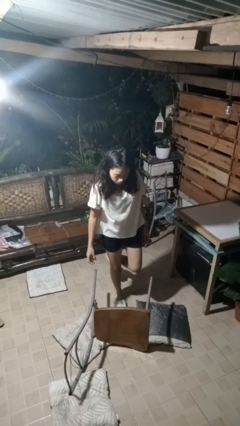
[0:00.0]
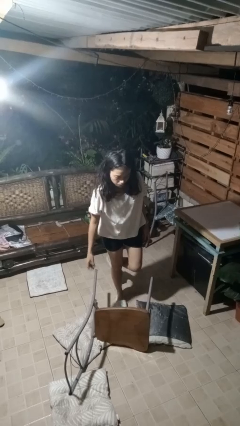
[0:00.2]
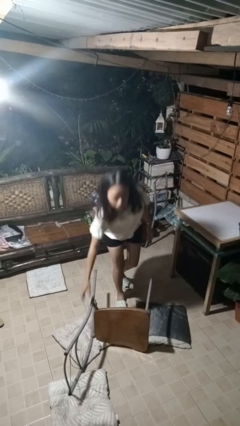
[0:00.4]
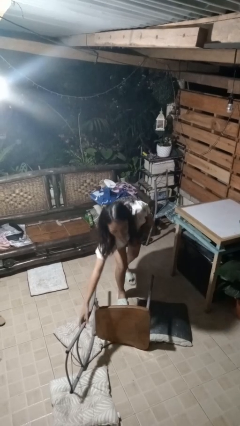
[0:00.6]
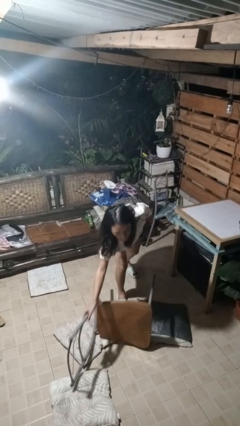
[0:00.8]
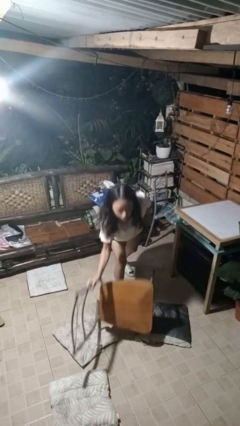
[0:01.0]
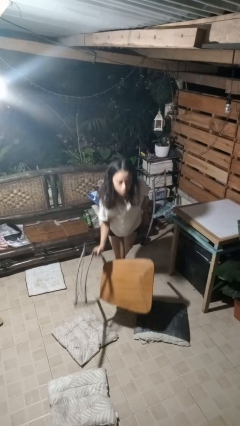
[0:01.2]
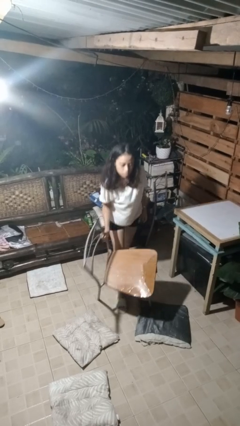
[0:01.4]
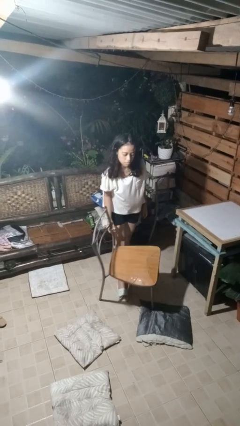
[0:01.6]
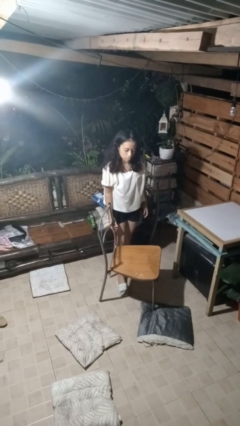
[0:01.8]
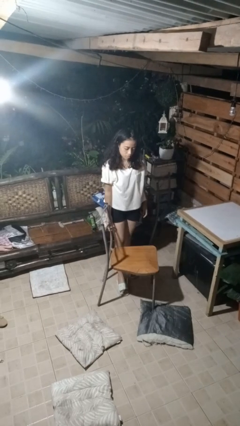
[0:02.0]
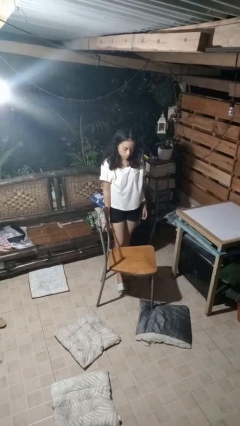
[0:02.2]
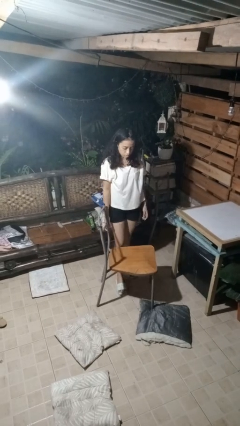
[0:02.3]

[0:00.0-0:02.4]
person sets upright furniture

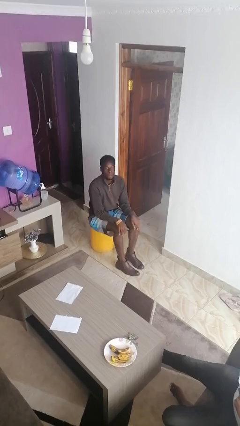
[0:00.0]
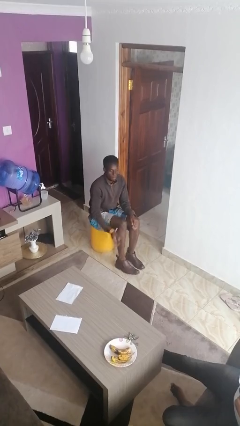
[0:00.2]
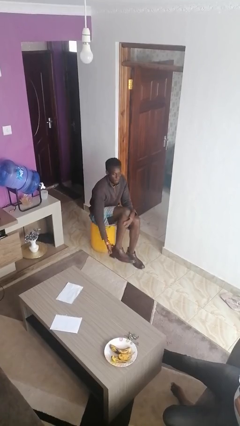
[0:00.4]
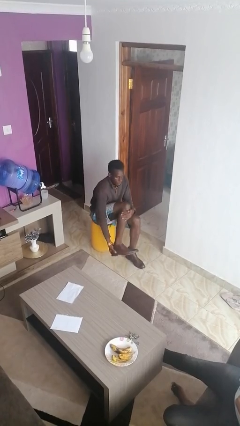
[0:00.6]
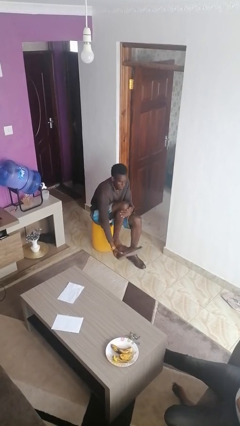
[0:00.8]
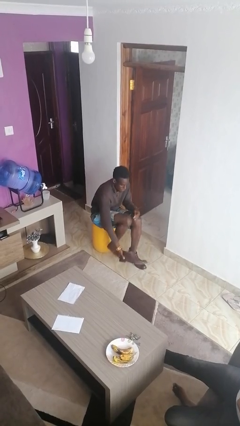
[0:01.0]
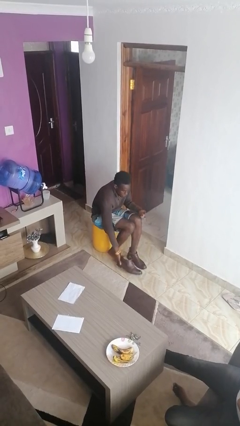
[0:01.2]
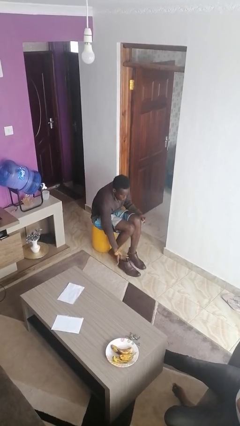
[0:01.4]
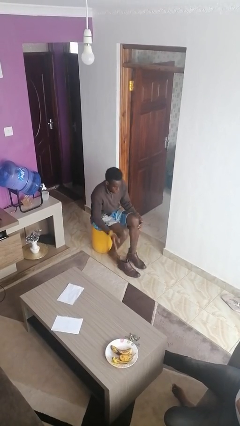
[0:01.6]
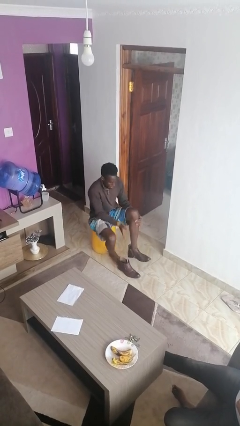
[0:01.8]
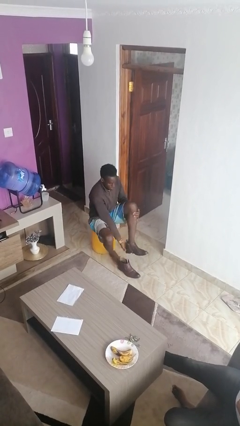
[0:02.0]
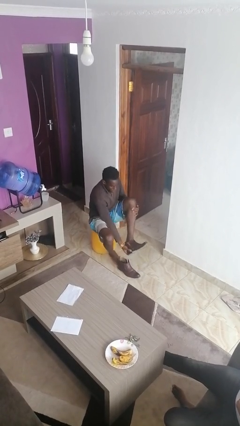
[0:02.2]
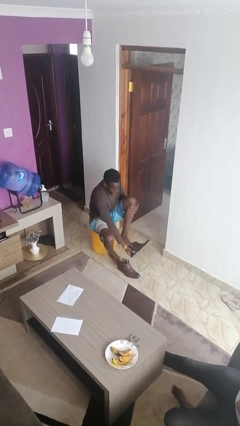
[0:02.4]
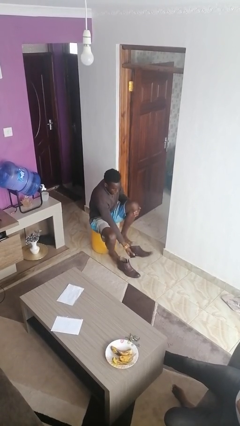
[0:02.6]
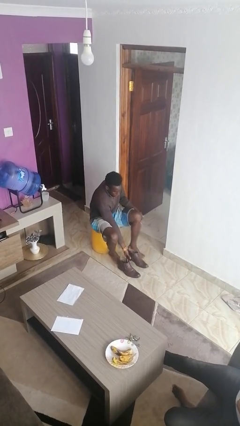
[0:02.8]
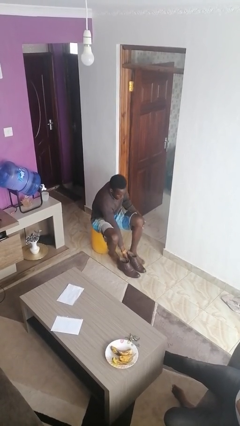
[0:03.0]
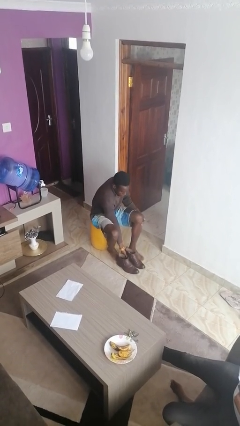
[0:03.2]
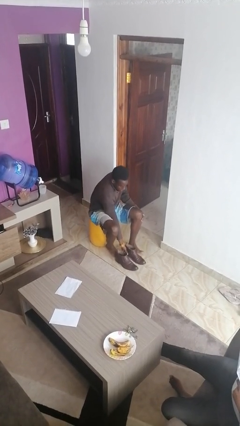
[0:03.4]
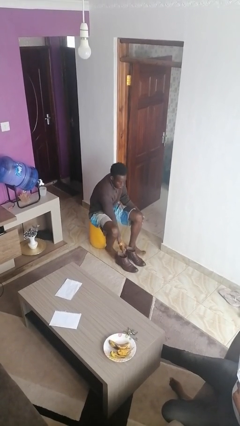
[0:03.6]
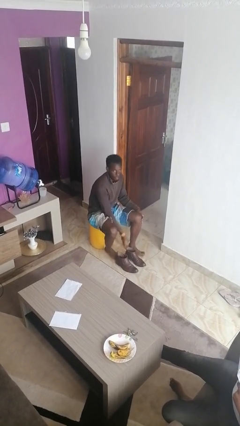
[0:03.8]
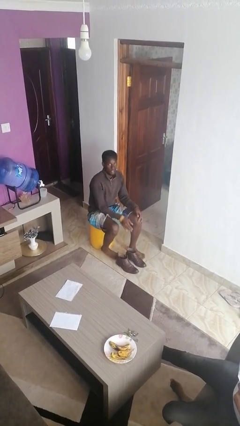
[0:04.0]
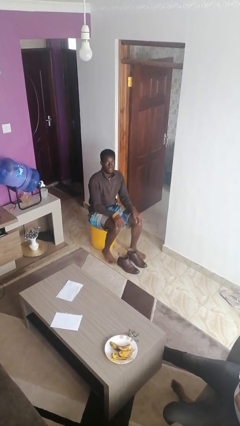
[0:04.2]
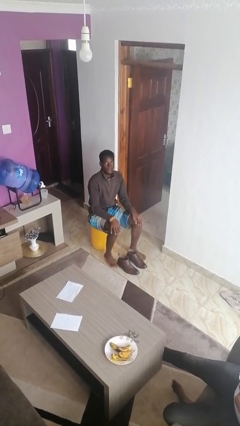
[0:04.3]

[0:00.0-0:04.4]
person takes off boots

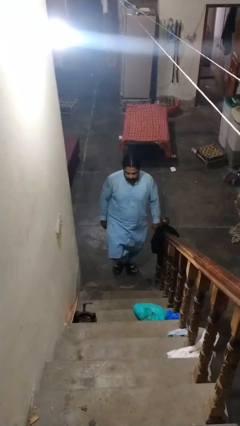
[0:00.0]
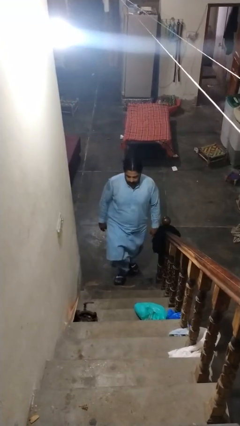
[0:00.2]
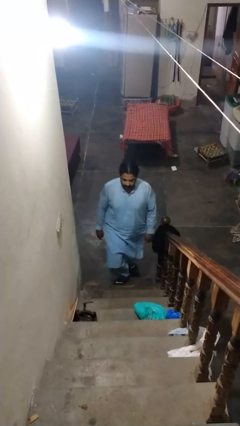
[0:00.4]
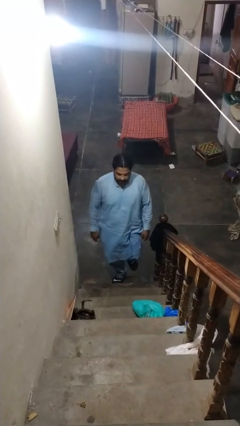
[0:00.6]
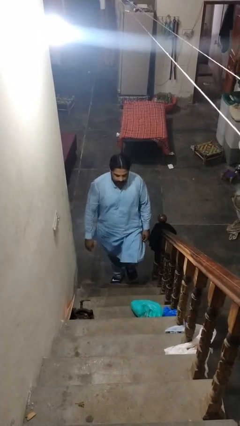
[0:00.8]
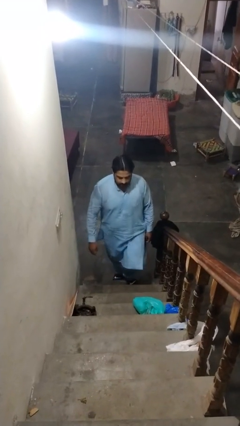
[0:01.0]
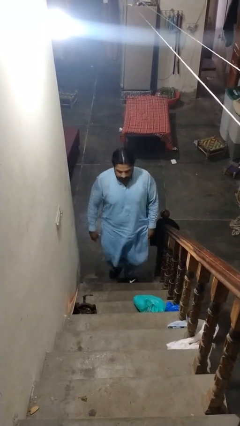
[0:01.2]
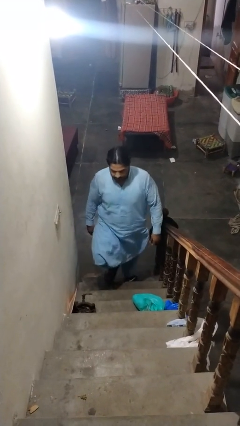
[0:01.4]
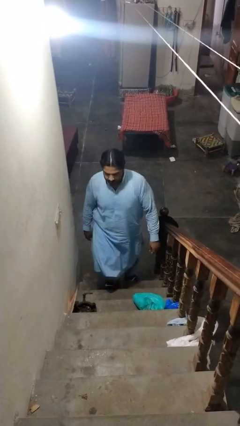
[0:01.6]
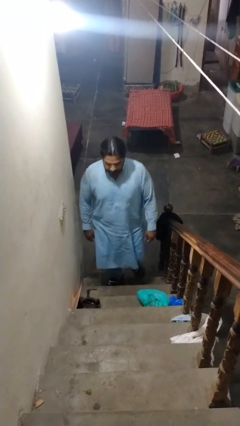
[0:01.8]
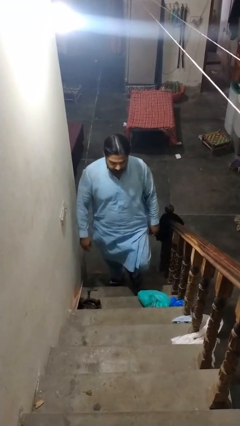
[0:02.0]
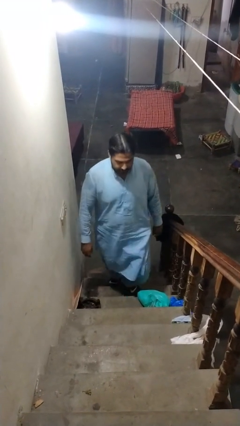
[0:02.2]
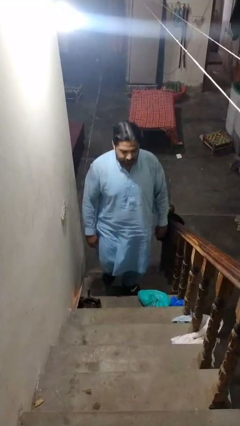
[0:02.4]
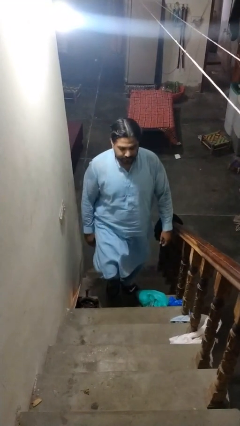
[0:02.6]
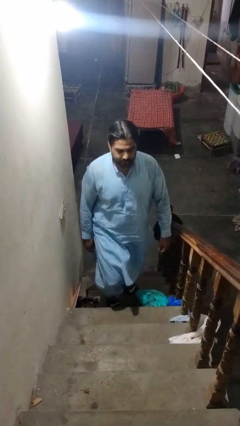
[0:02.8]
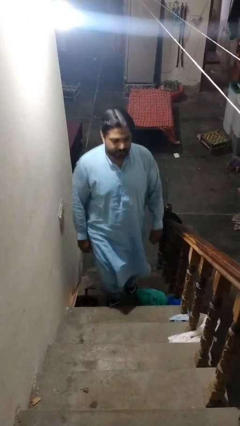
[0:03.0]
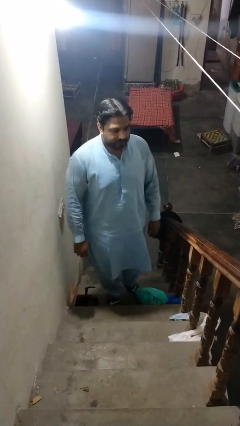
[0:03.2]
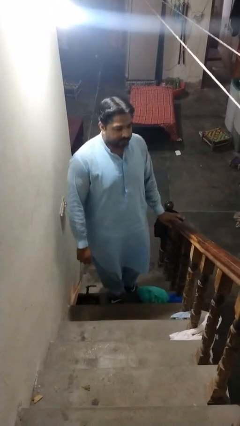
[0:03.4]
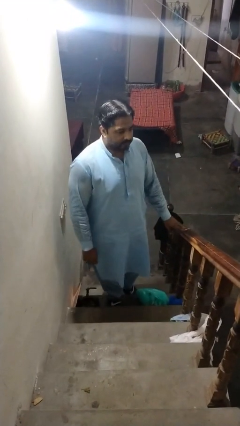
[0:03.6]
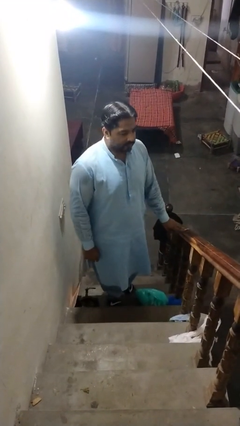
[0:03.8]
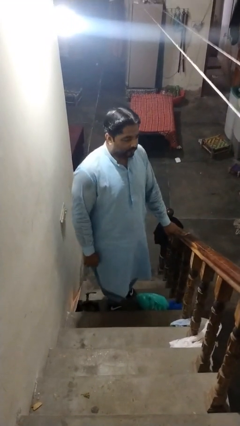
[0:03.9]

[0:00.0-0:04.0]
person climbs up stairs

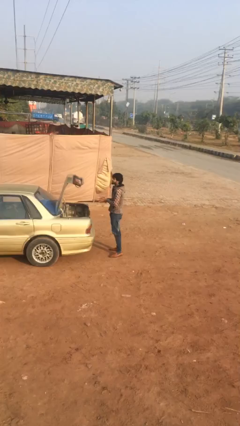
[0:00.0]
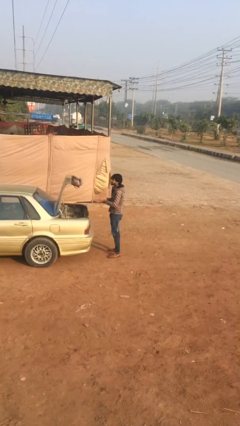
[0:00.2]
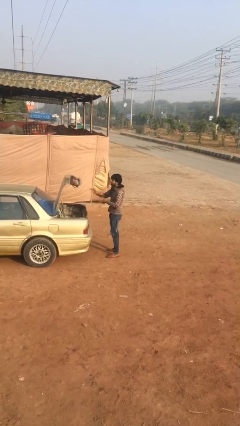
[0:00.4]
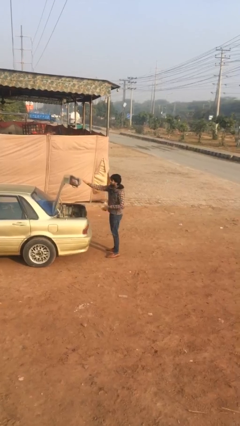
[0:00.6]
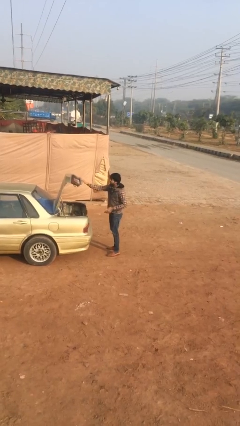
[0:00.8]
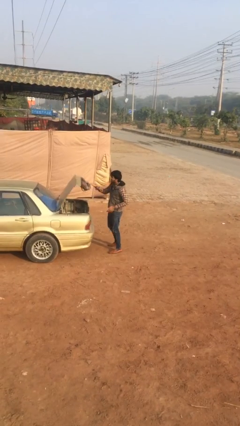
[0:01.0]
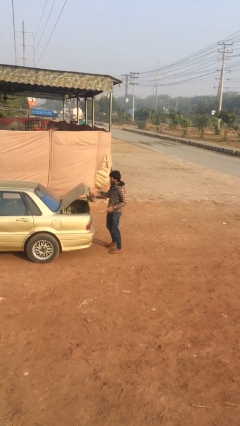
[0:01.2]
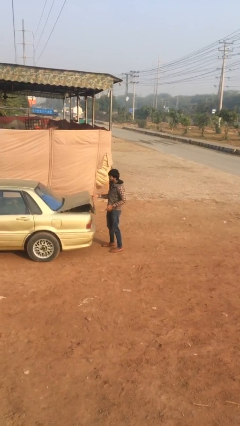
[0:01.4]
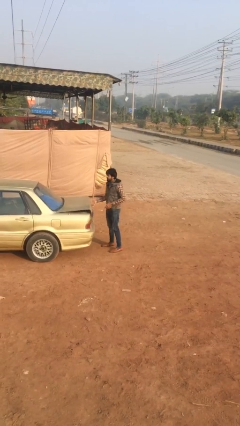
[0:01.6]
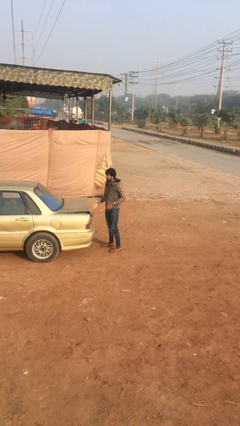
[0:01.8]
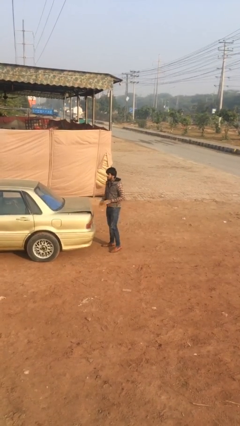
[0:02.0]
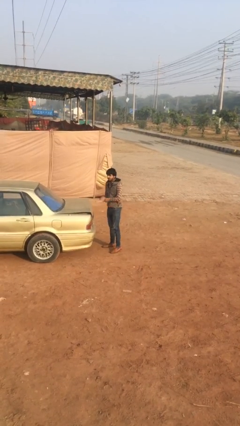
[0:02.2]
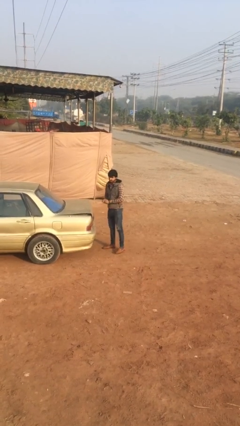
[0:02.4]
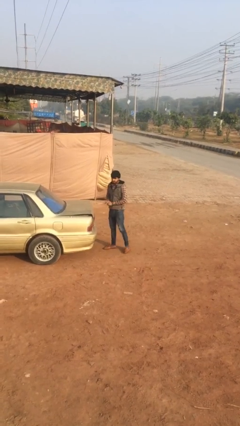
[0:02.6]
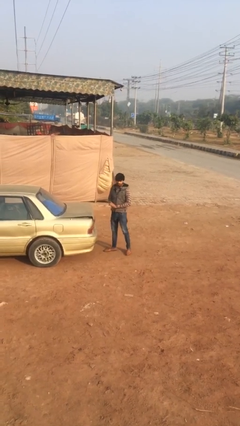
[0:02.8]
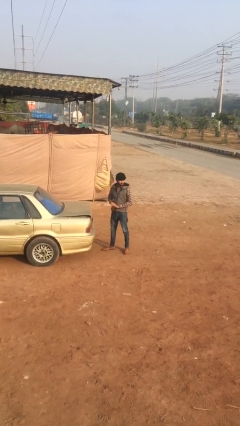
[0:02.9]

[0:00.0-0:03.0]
person closes car trunk

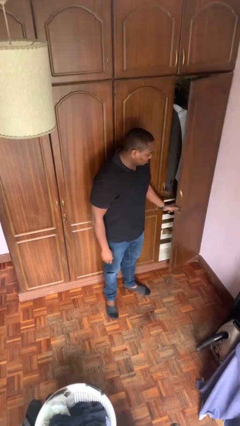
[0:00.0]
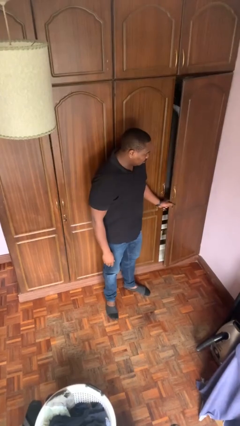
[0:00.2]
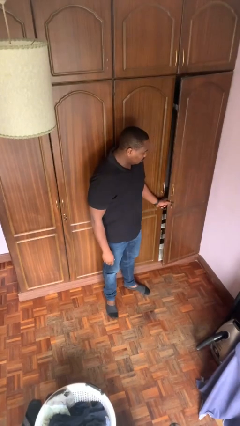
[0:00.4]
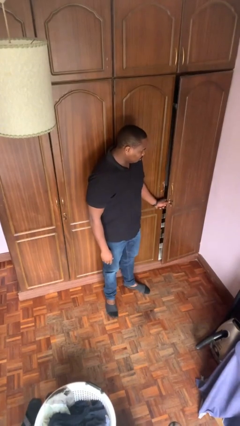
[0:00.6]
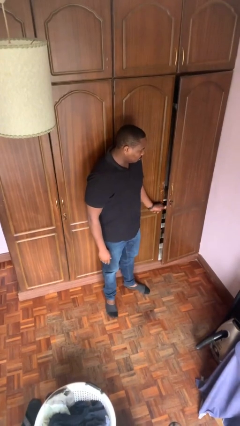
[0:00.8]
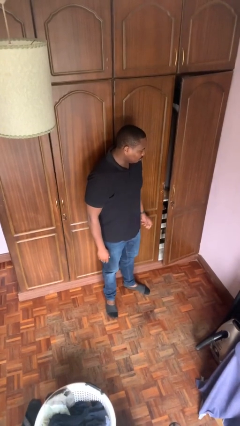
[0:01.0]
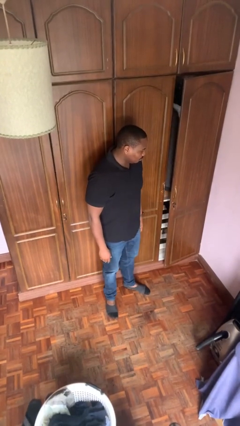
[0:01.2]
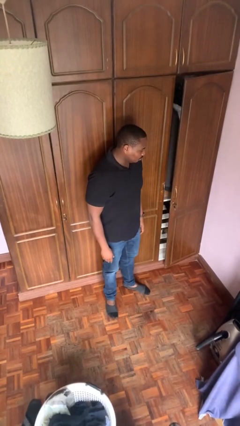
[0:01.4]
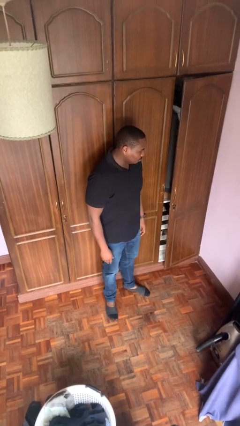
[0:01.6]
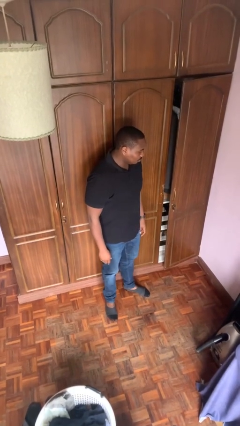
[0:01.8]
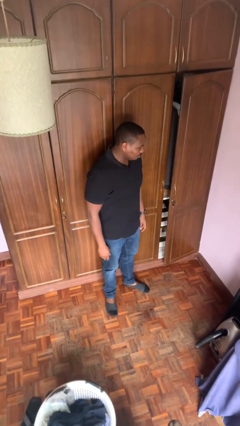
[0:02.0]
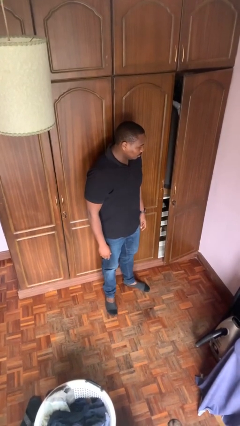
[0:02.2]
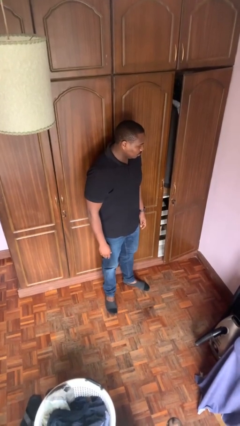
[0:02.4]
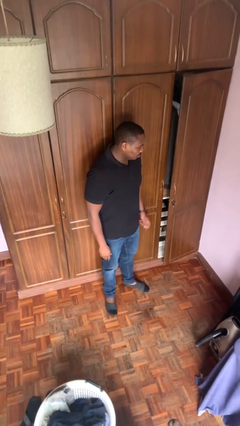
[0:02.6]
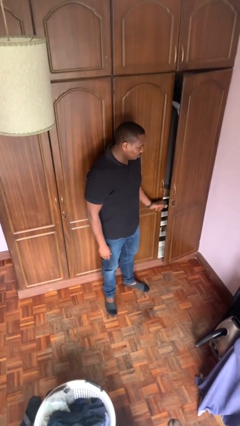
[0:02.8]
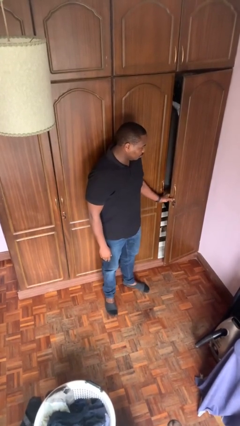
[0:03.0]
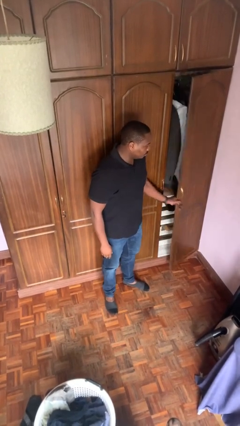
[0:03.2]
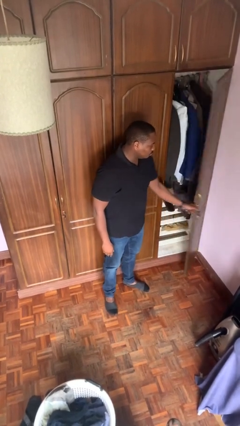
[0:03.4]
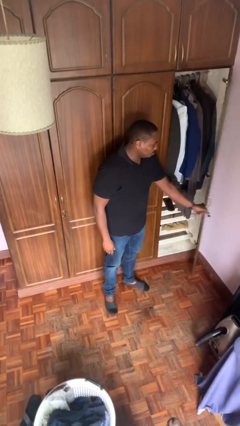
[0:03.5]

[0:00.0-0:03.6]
person closes closet door

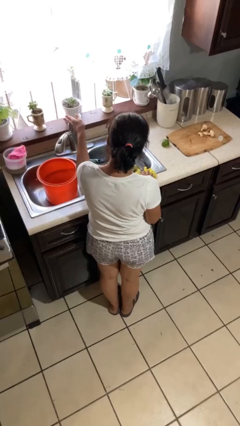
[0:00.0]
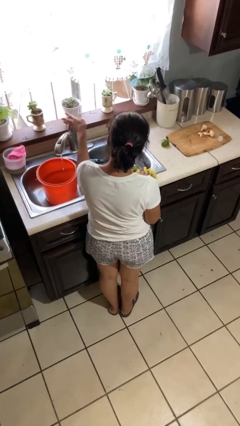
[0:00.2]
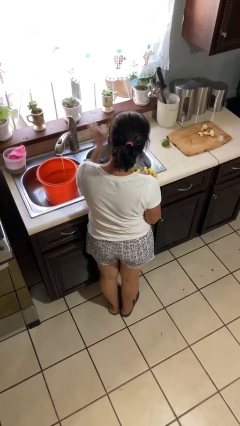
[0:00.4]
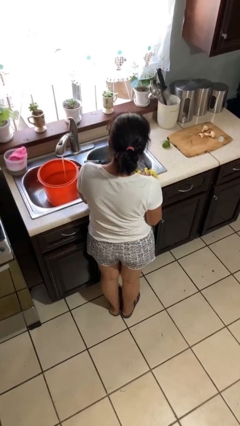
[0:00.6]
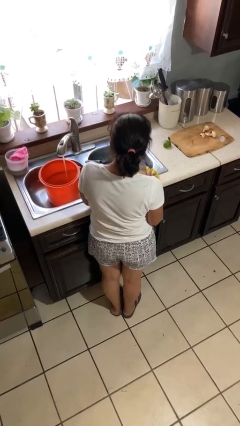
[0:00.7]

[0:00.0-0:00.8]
person turns on faucet
